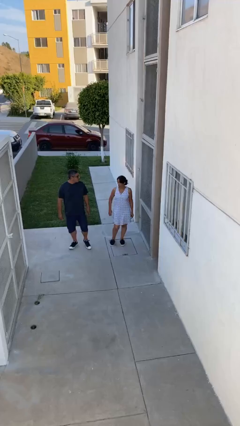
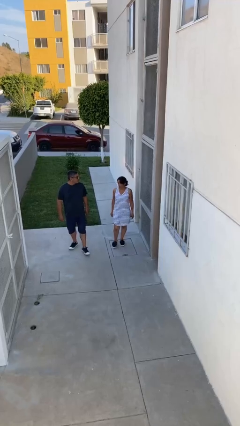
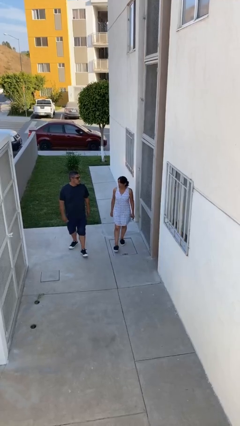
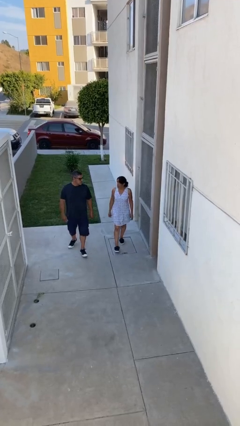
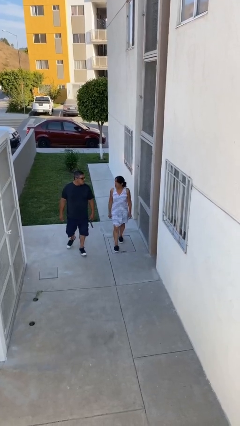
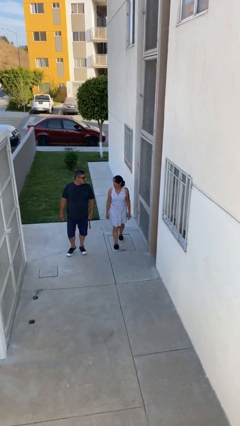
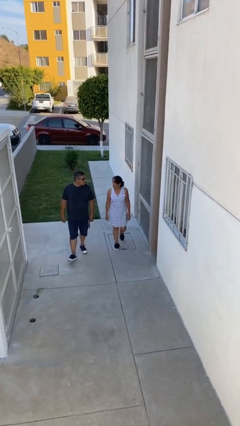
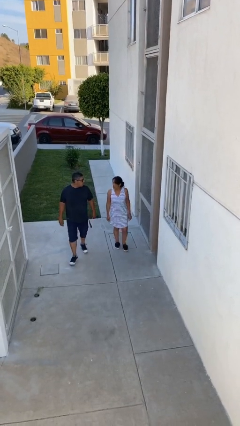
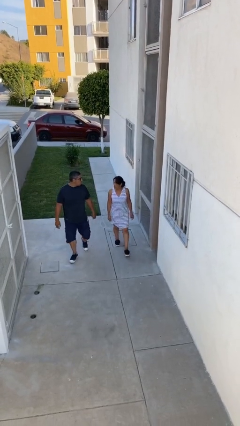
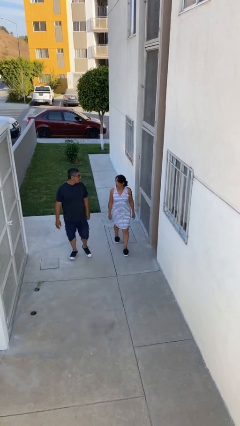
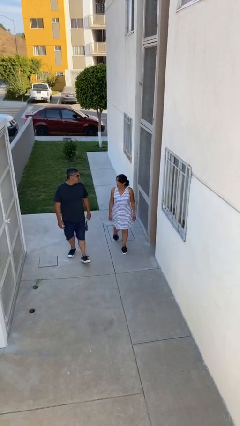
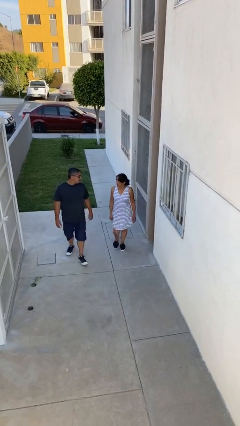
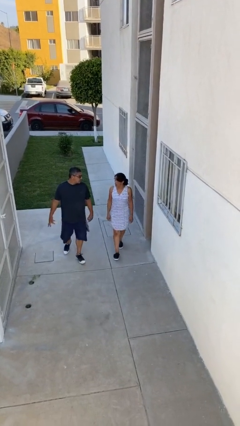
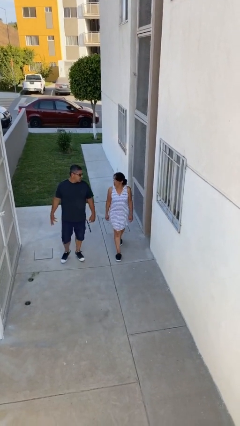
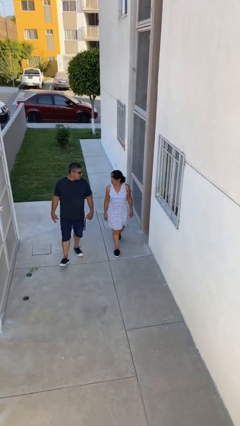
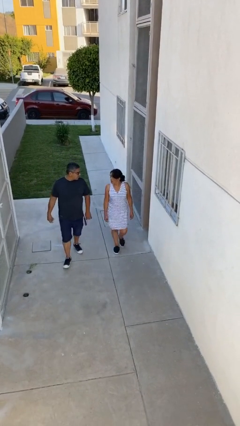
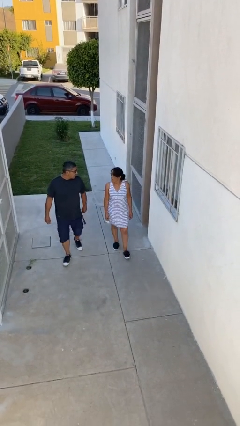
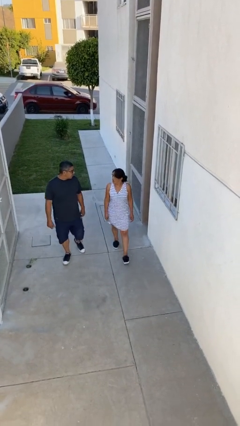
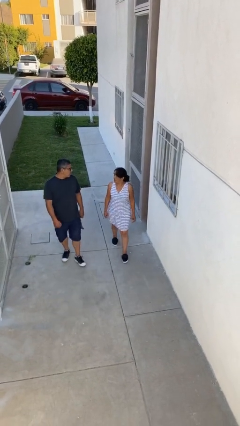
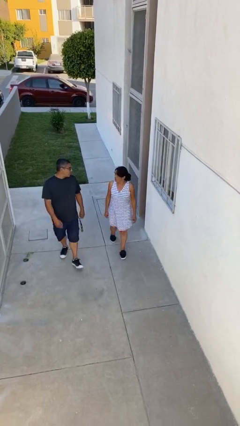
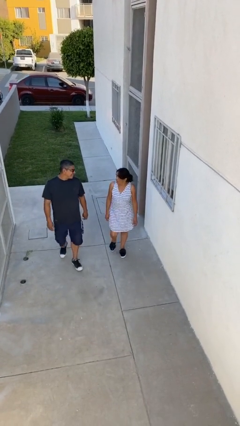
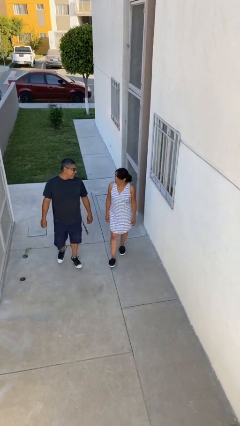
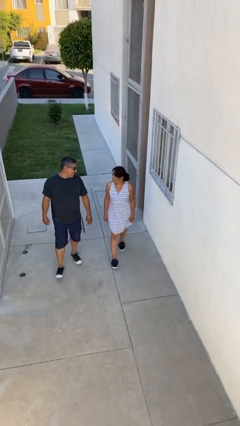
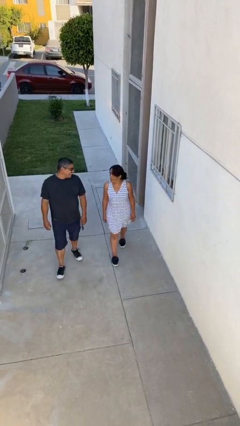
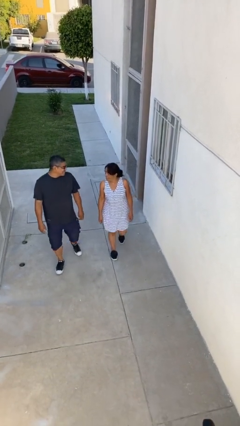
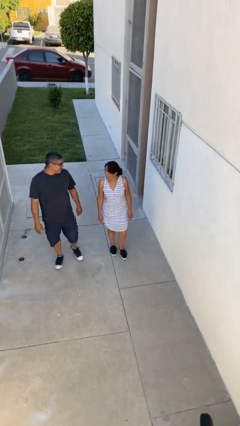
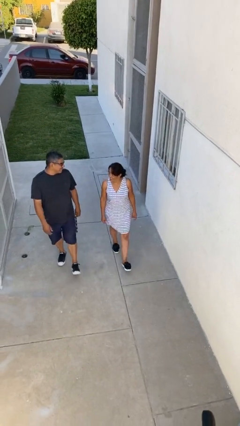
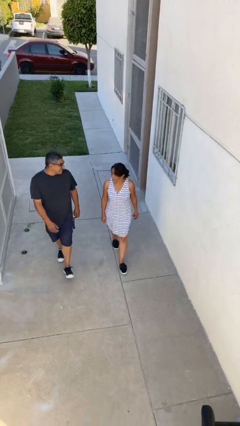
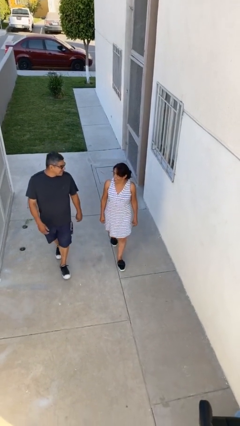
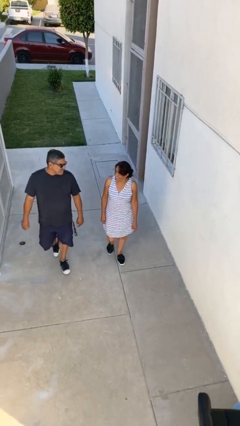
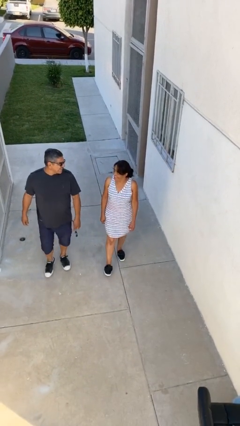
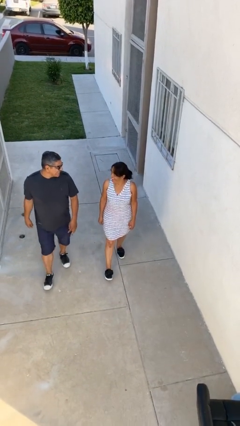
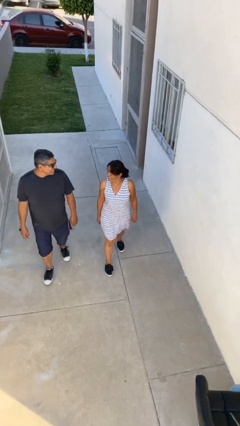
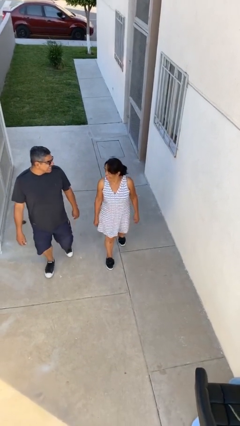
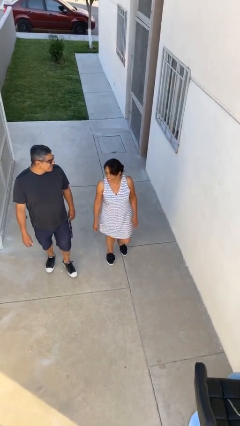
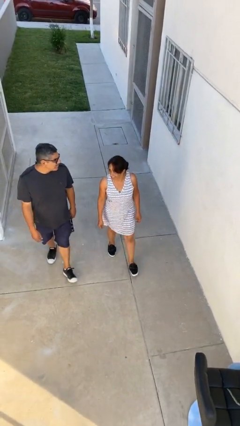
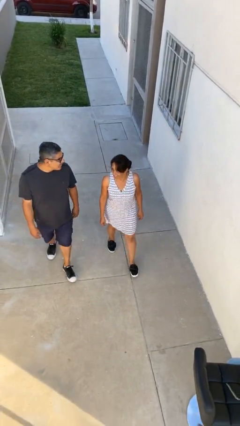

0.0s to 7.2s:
person talks to person

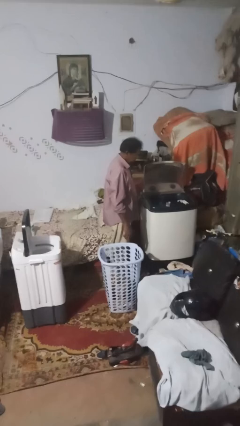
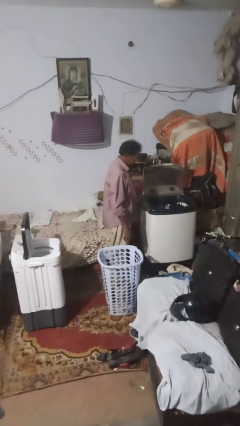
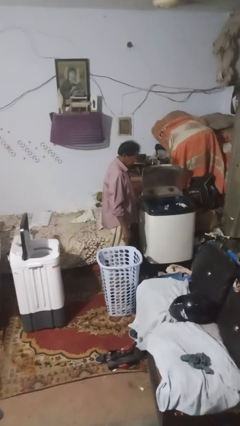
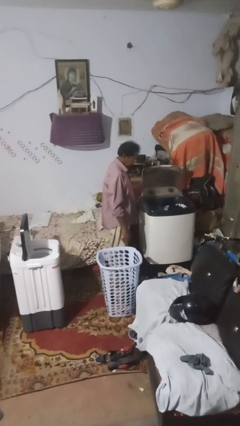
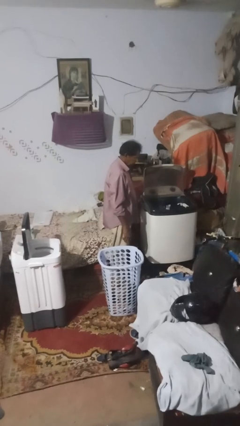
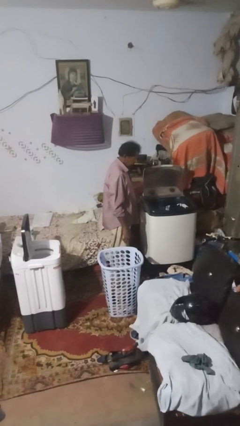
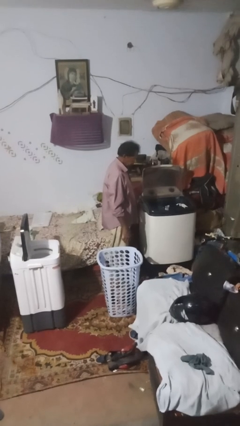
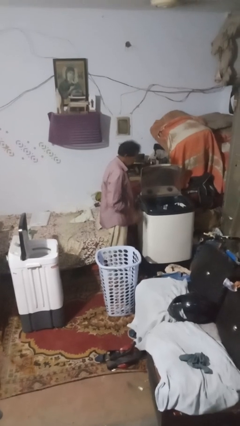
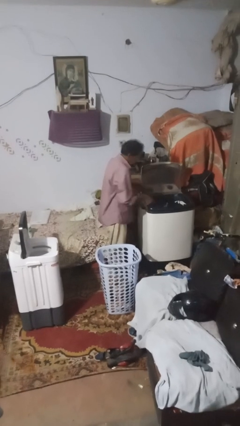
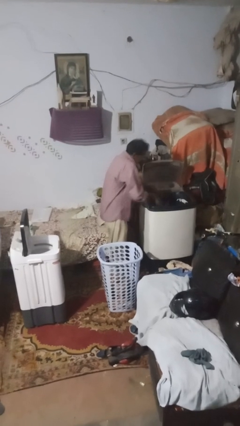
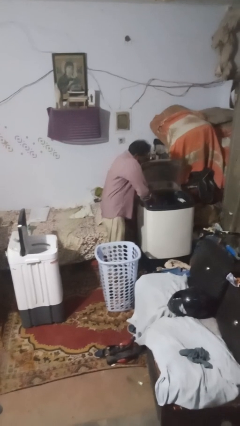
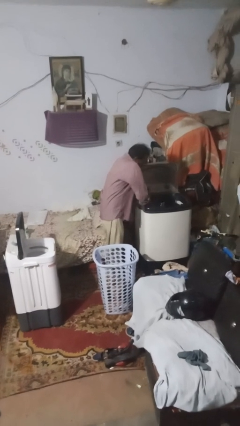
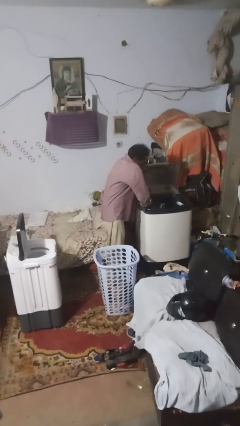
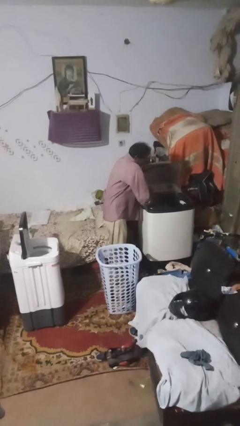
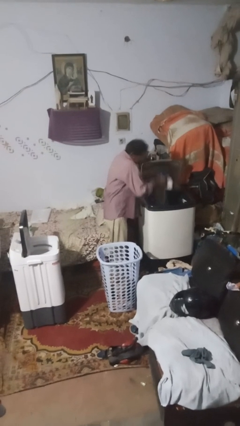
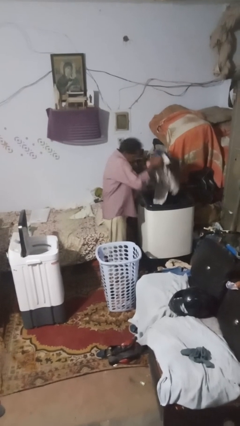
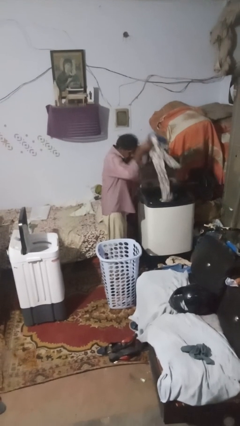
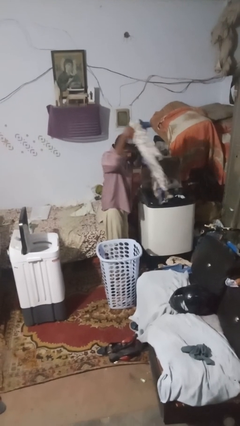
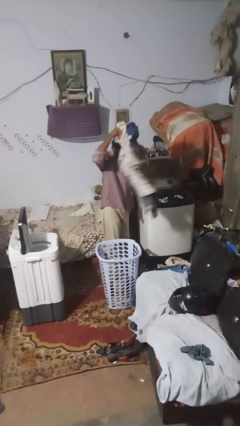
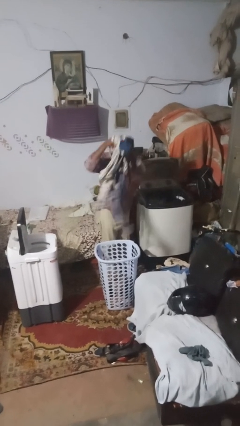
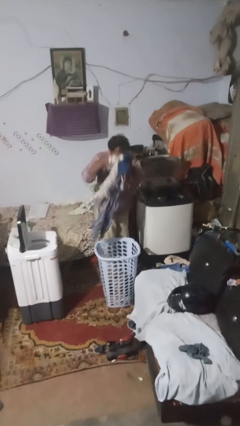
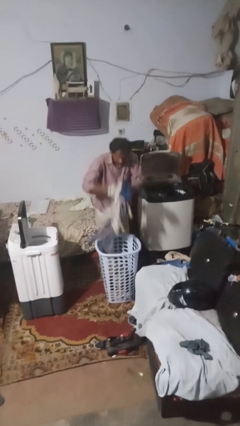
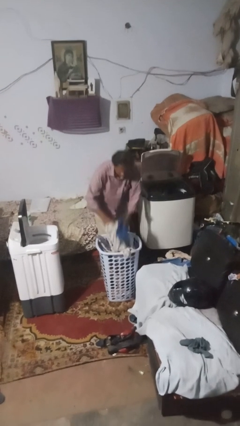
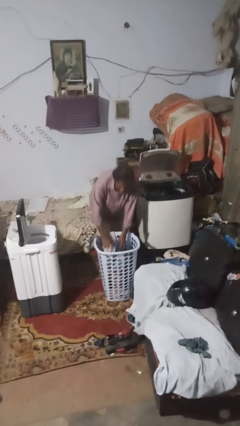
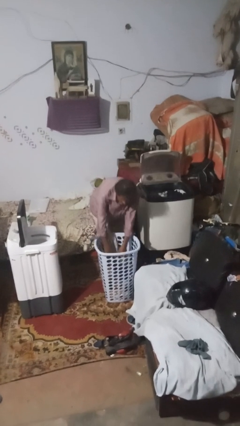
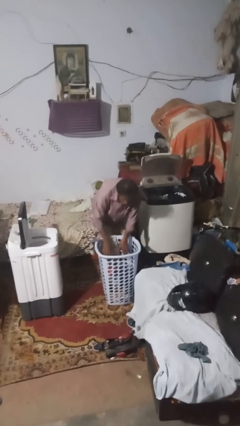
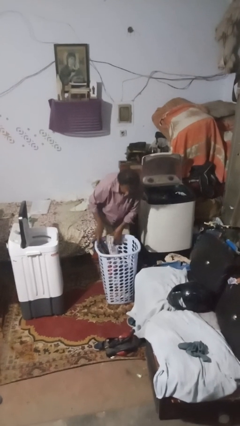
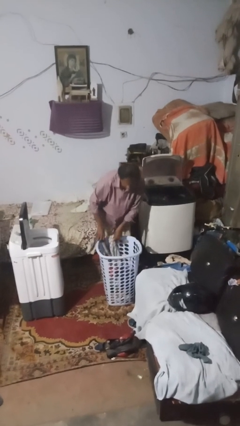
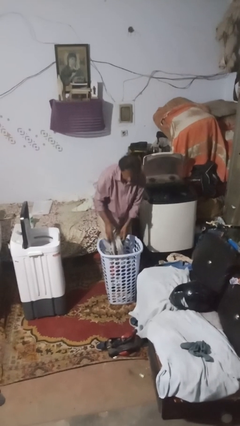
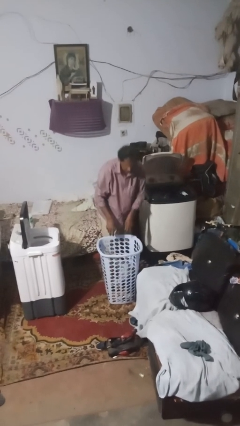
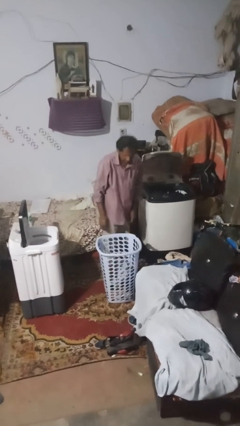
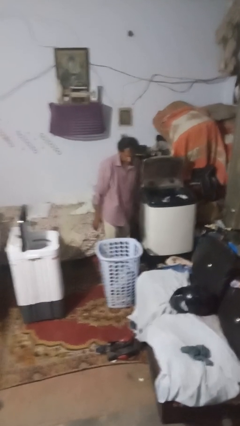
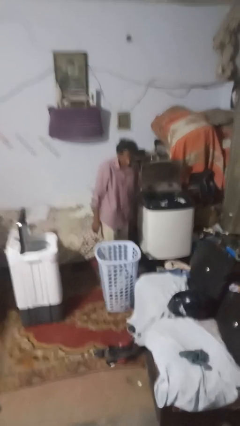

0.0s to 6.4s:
person unloads clotheswasher

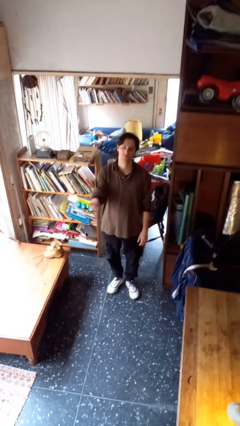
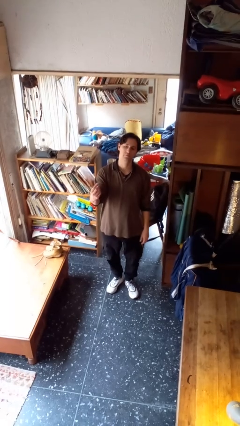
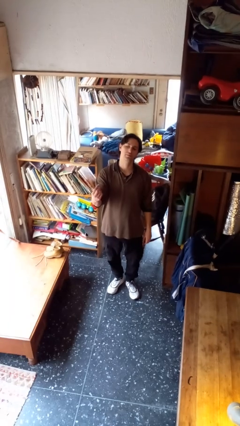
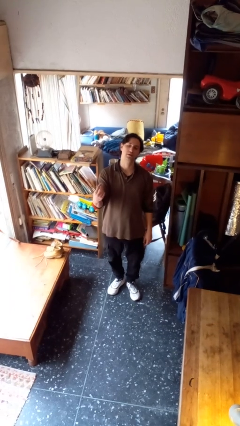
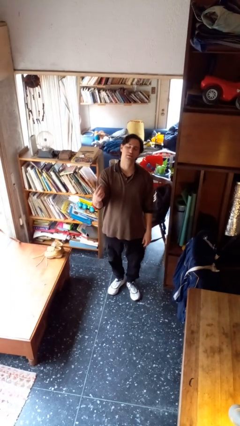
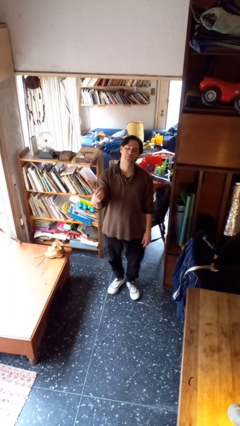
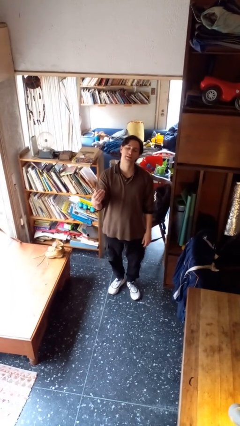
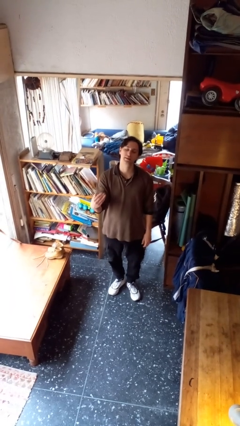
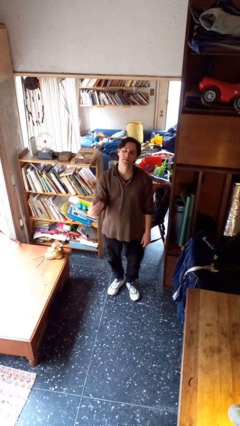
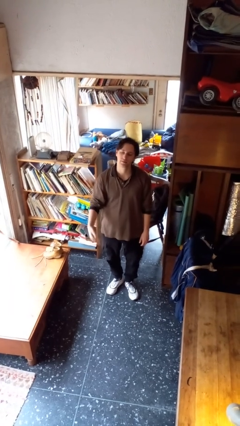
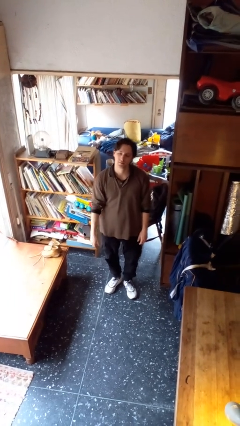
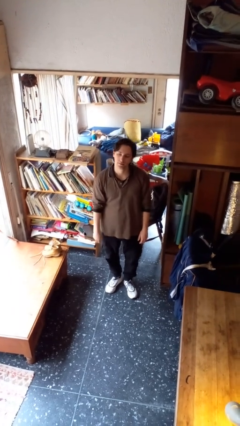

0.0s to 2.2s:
person gestures come here

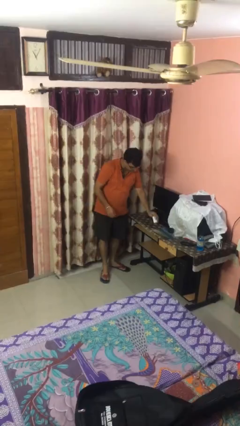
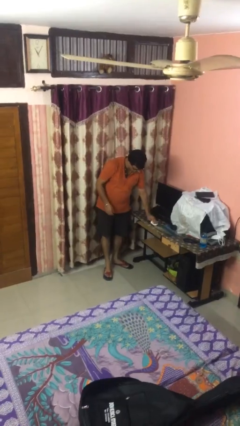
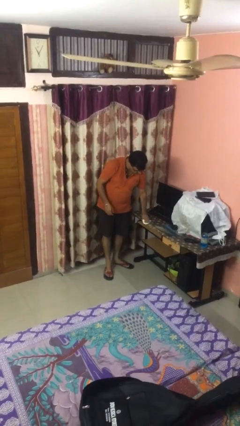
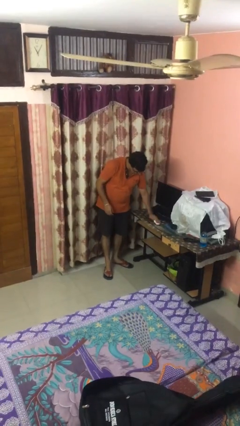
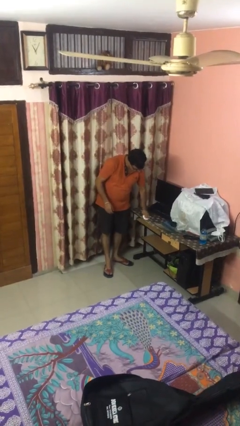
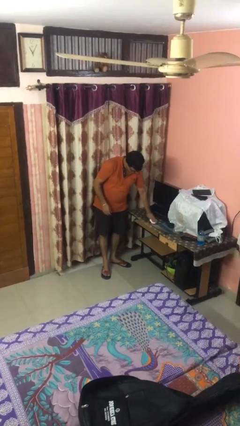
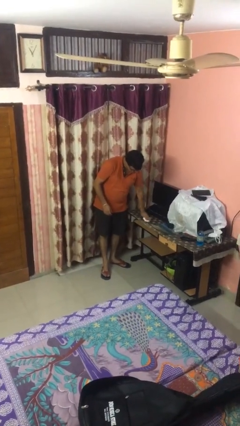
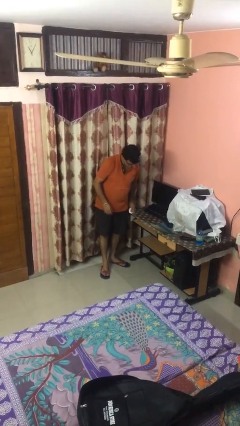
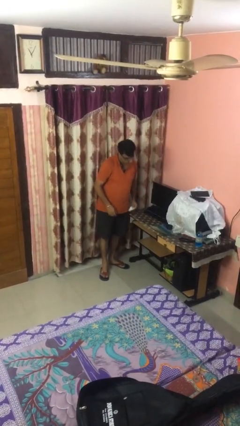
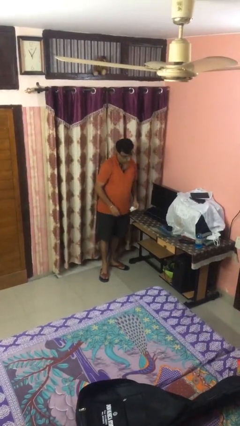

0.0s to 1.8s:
person cleans table with rag

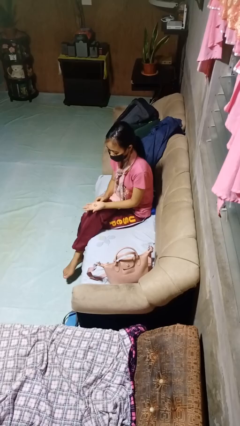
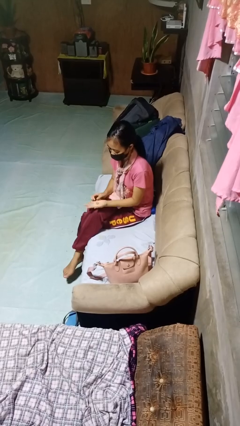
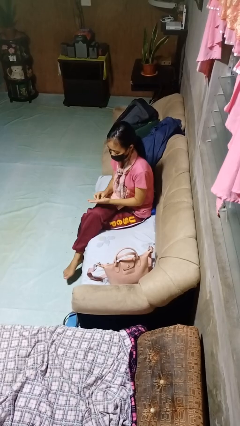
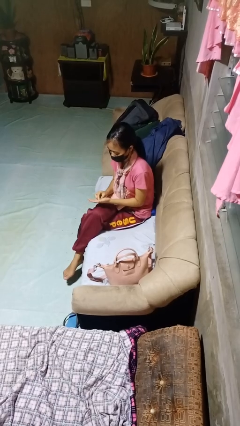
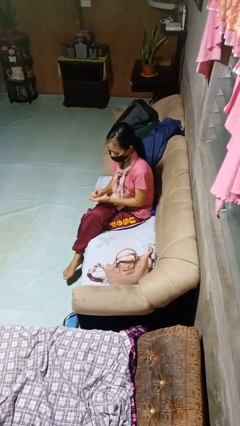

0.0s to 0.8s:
person puts on ring
